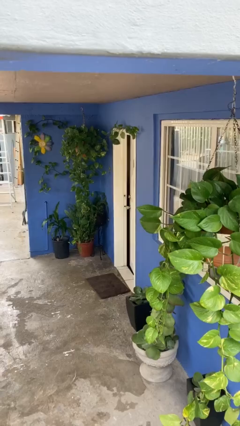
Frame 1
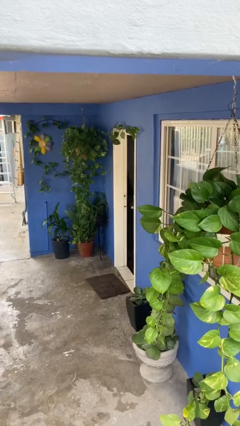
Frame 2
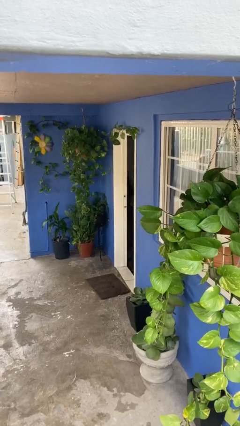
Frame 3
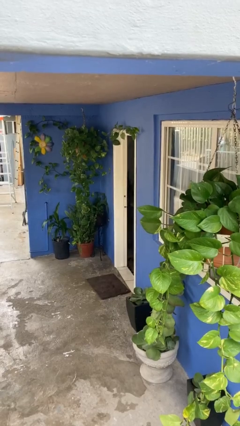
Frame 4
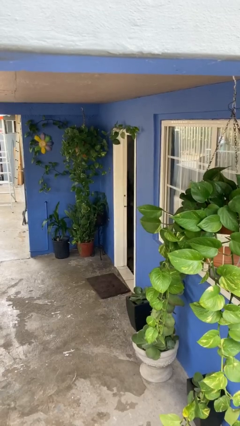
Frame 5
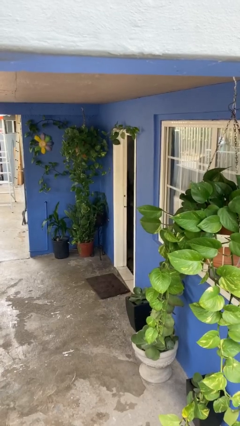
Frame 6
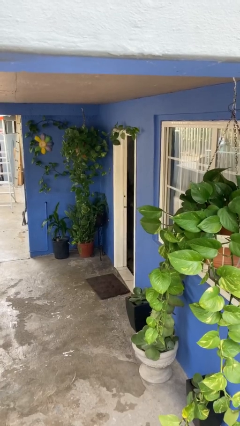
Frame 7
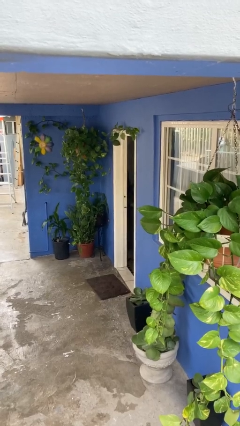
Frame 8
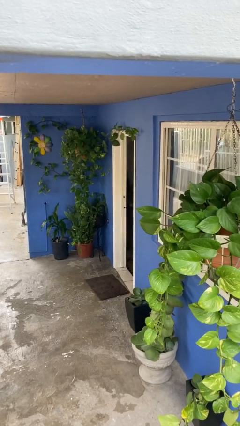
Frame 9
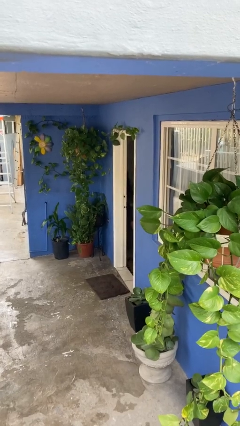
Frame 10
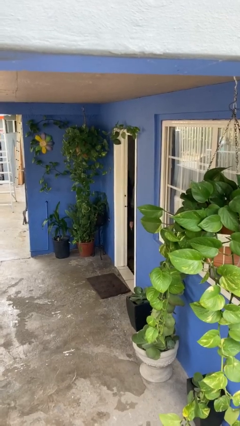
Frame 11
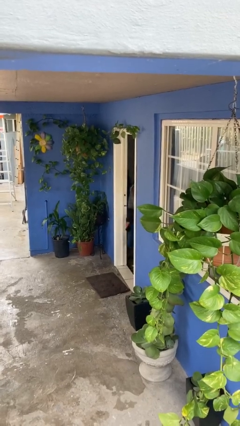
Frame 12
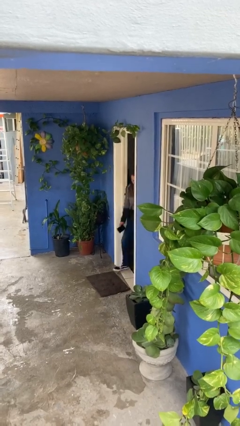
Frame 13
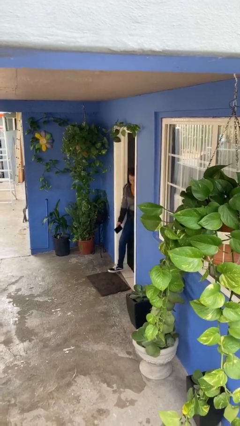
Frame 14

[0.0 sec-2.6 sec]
person opens facility door

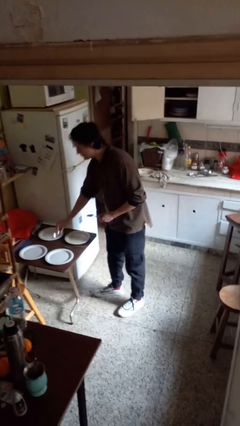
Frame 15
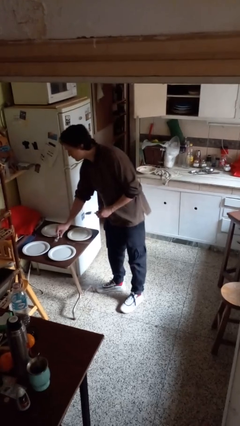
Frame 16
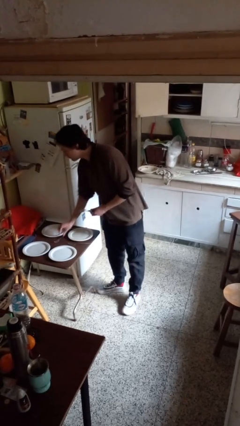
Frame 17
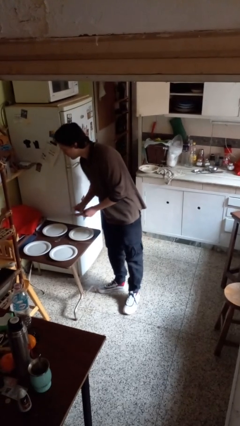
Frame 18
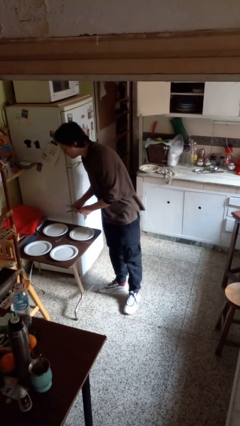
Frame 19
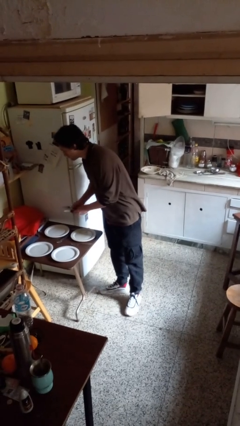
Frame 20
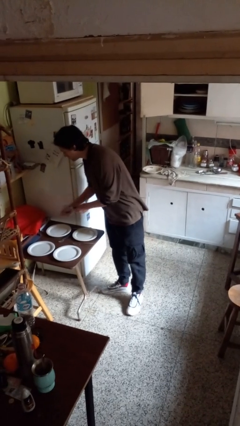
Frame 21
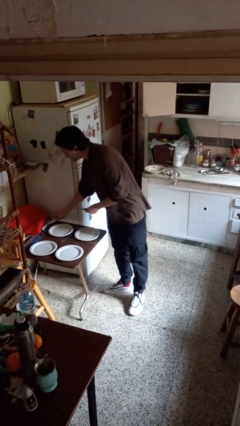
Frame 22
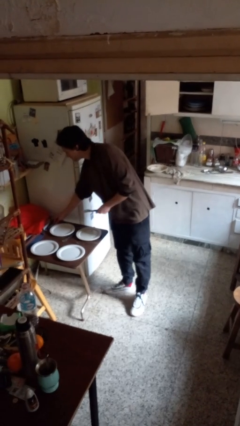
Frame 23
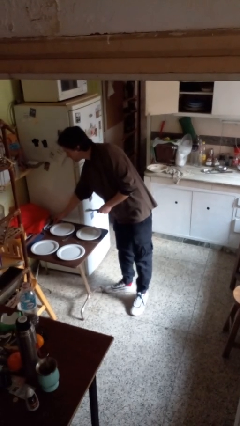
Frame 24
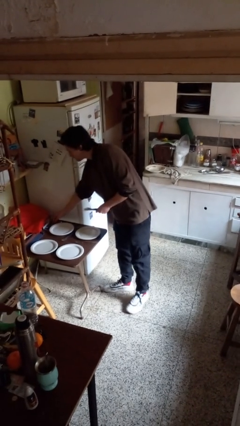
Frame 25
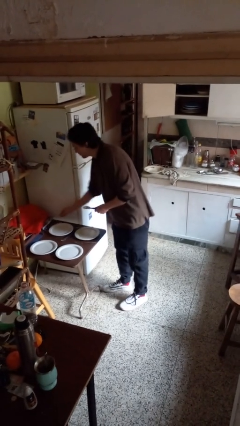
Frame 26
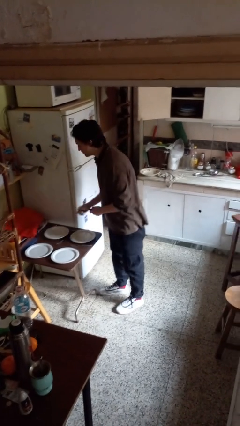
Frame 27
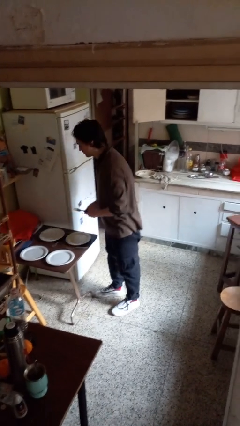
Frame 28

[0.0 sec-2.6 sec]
person sets table

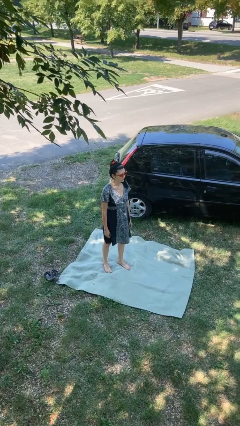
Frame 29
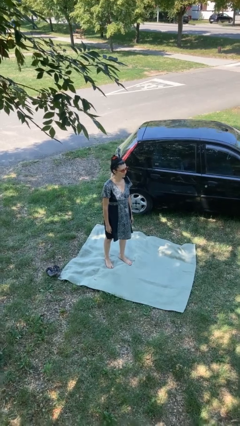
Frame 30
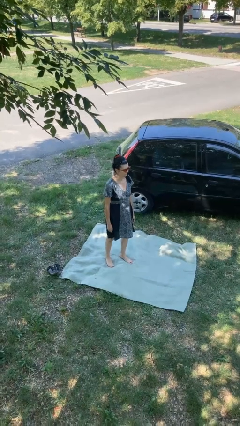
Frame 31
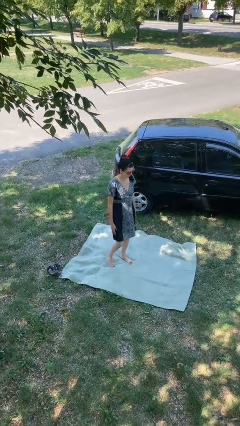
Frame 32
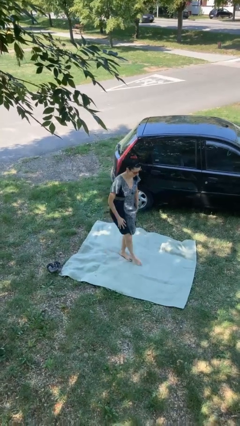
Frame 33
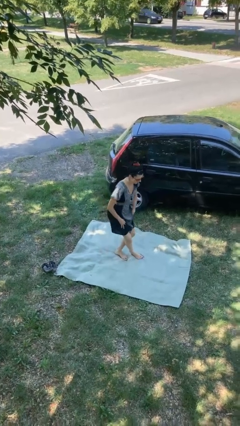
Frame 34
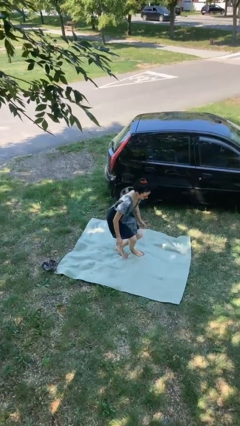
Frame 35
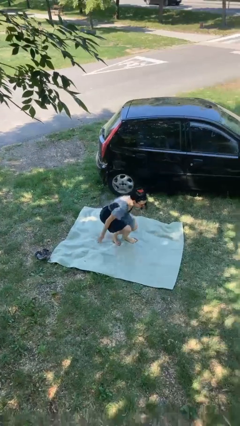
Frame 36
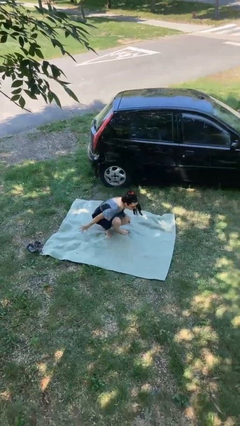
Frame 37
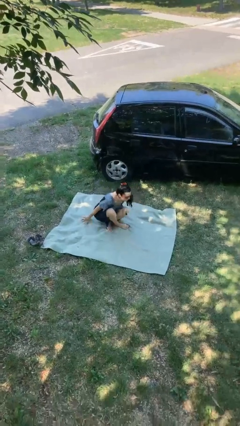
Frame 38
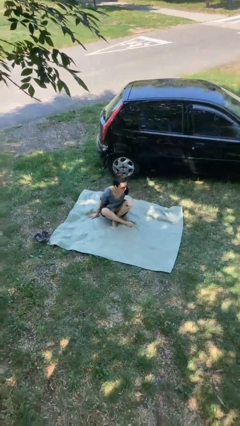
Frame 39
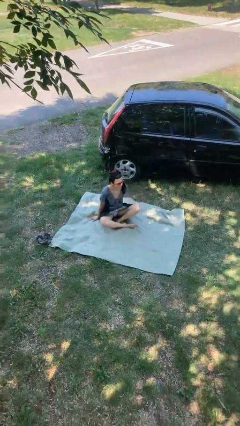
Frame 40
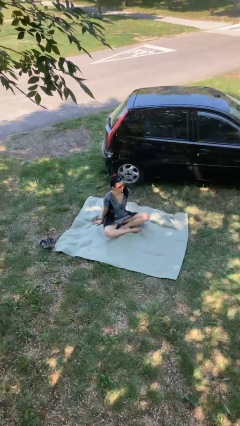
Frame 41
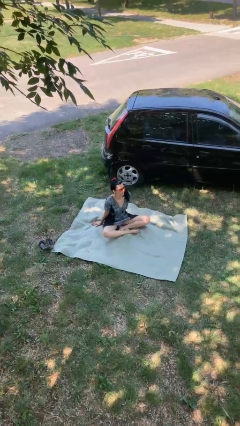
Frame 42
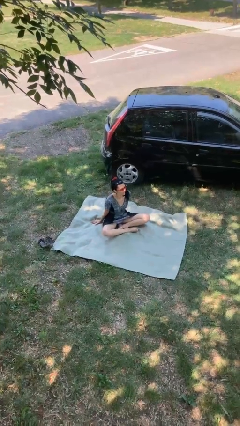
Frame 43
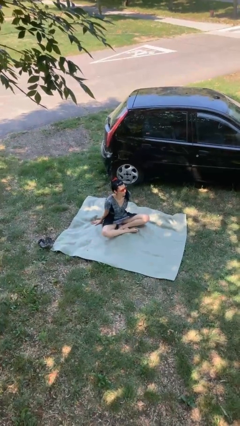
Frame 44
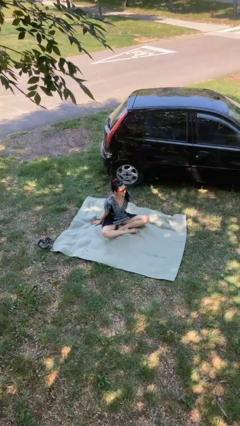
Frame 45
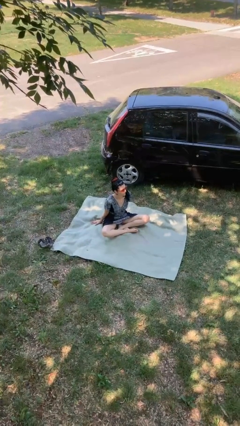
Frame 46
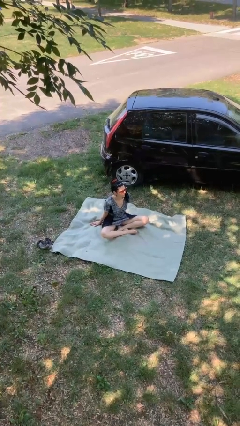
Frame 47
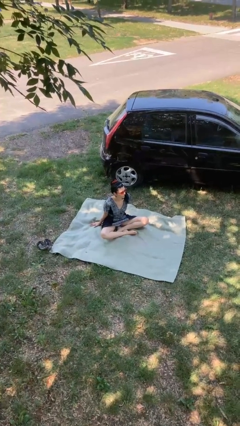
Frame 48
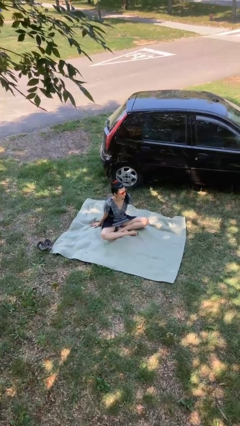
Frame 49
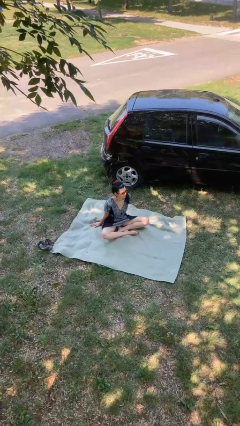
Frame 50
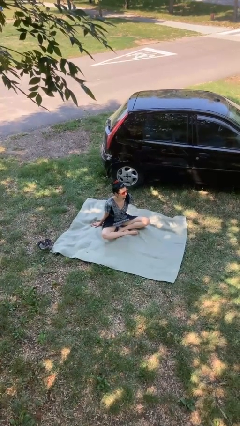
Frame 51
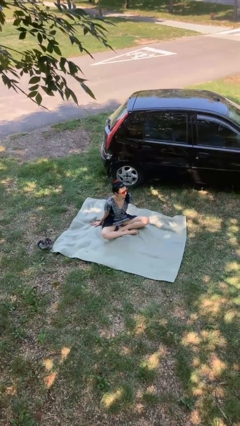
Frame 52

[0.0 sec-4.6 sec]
person sits crisscross

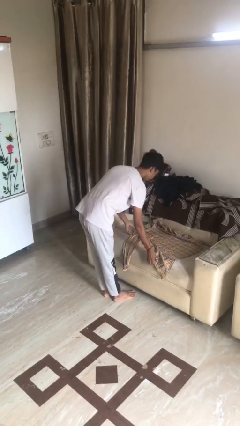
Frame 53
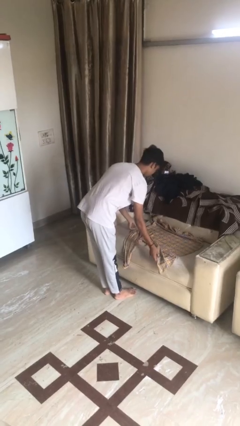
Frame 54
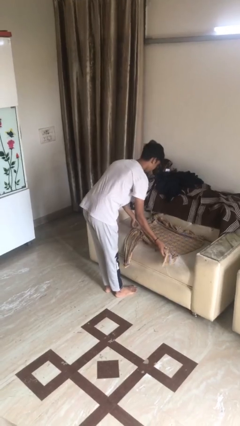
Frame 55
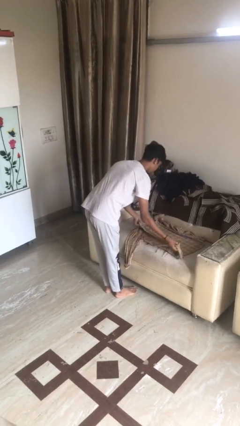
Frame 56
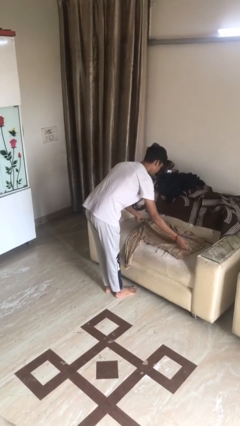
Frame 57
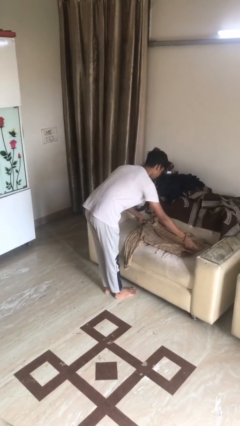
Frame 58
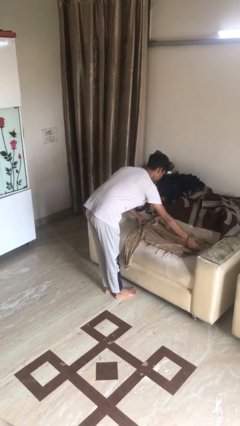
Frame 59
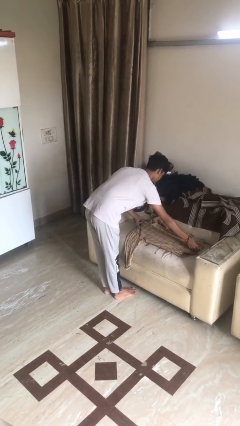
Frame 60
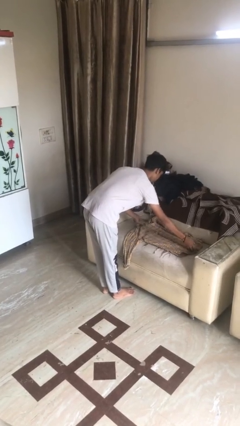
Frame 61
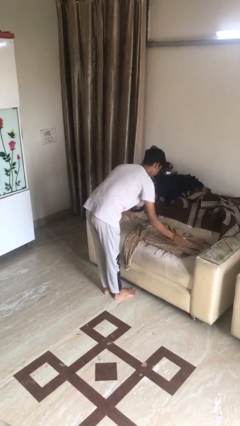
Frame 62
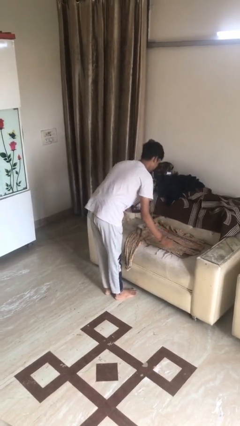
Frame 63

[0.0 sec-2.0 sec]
person folds shirt

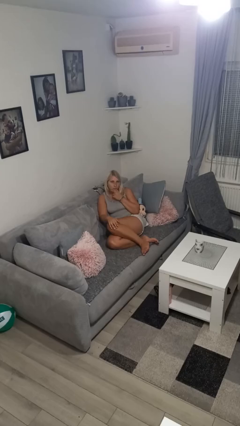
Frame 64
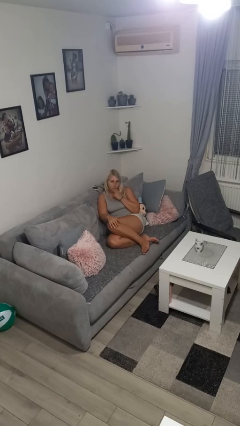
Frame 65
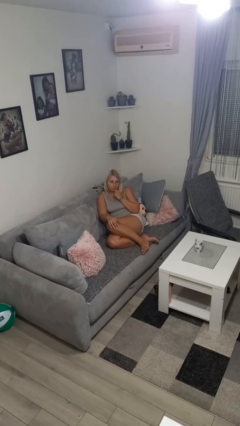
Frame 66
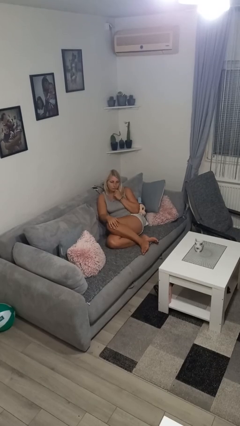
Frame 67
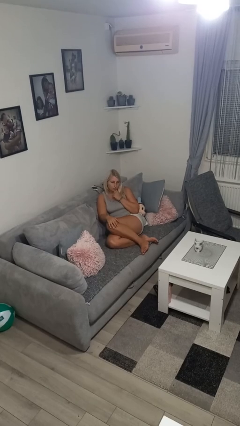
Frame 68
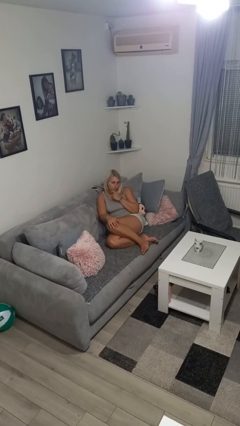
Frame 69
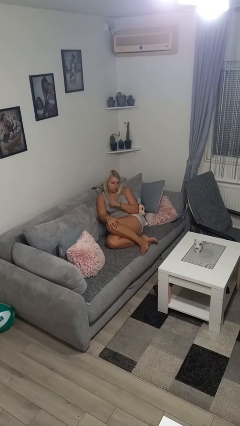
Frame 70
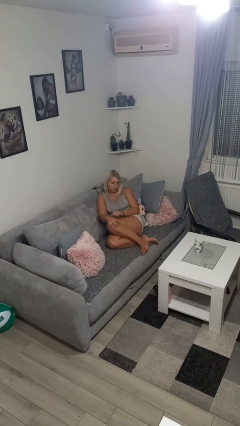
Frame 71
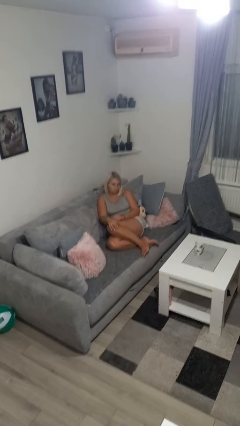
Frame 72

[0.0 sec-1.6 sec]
person strokes chin

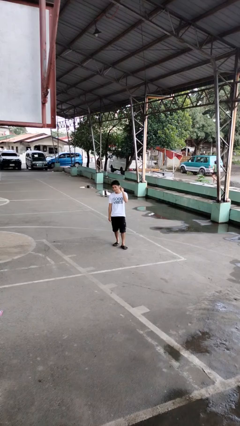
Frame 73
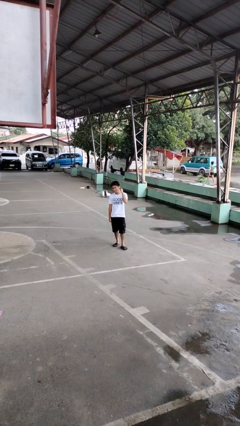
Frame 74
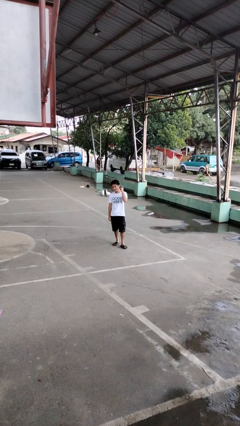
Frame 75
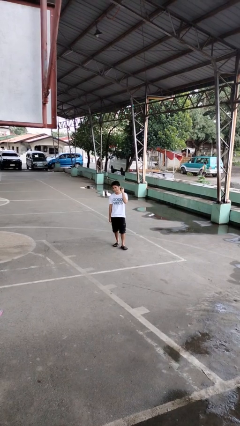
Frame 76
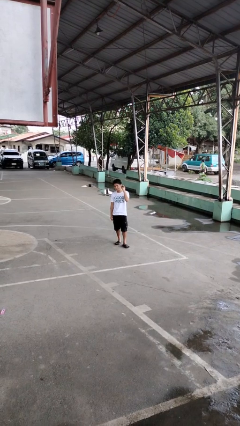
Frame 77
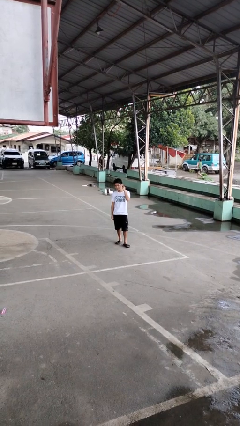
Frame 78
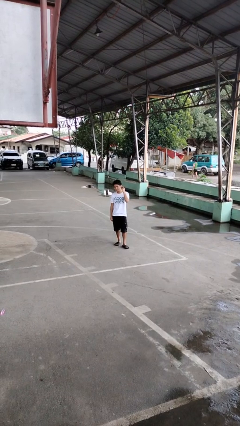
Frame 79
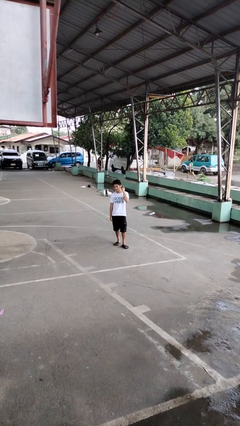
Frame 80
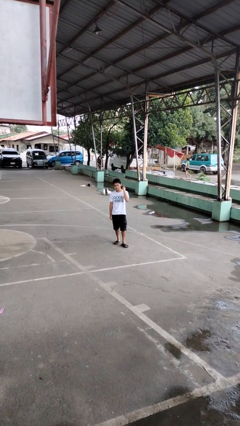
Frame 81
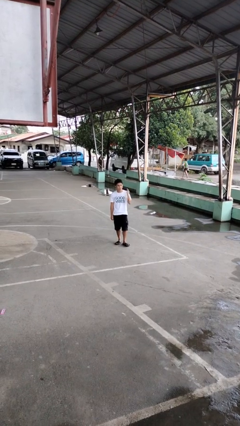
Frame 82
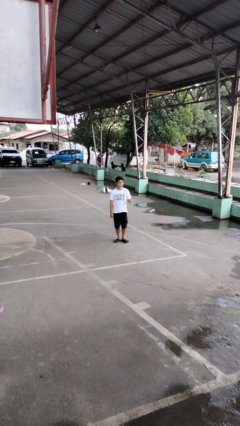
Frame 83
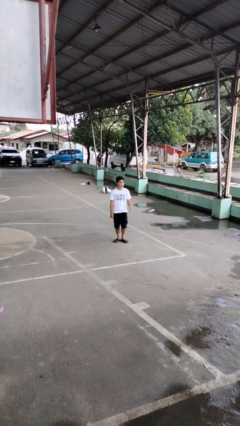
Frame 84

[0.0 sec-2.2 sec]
person gestures listen closely

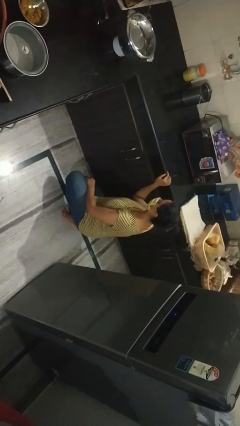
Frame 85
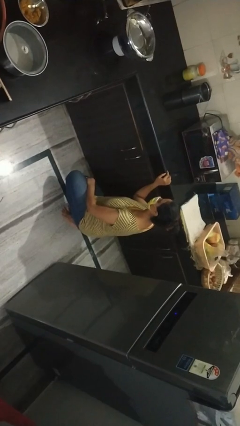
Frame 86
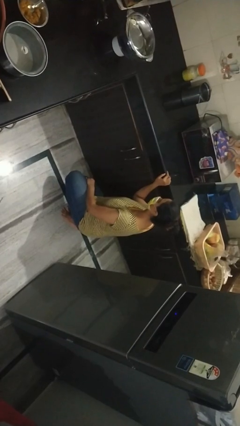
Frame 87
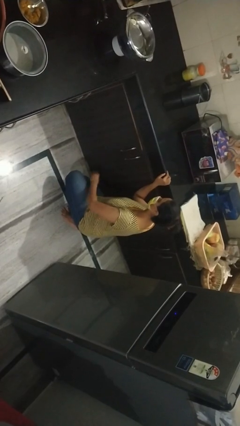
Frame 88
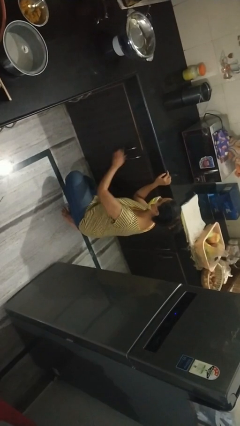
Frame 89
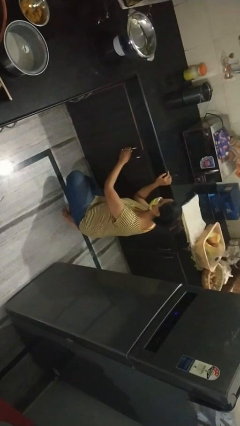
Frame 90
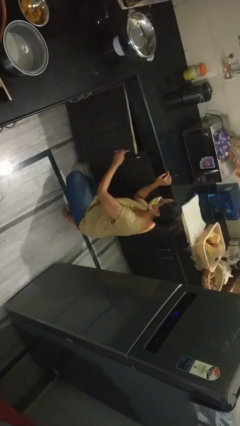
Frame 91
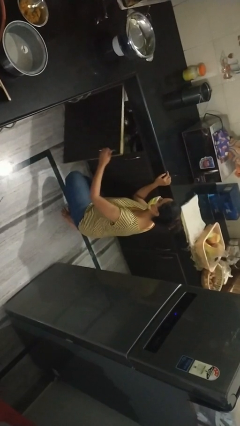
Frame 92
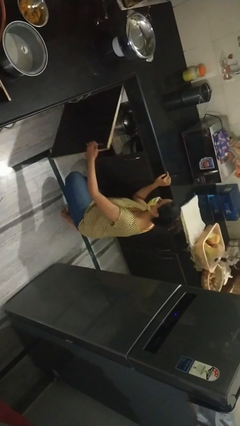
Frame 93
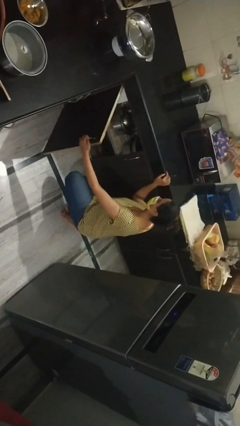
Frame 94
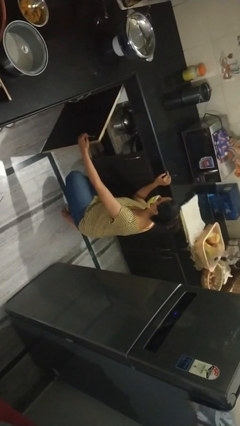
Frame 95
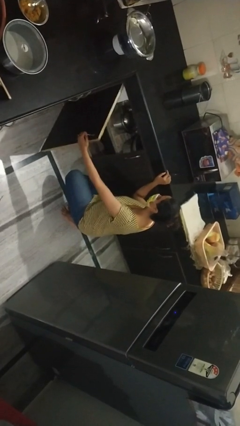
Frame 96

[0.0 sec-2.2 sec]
person opens cabinet
